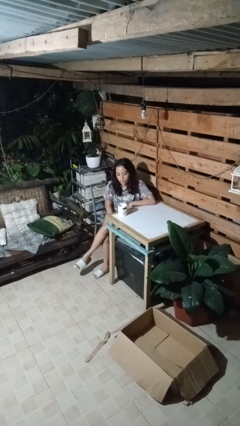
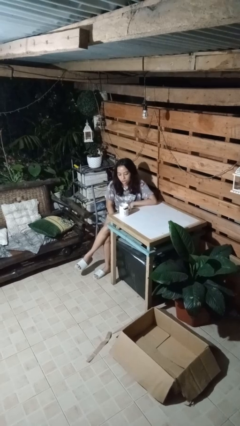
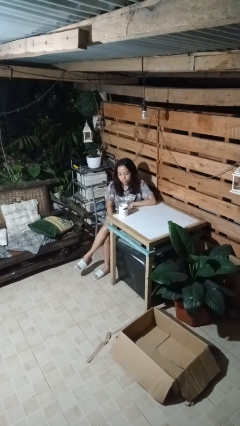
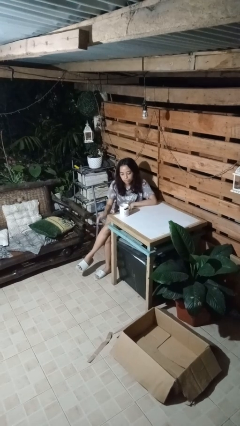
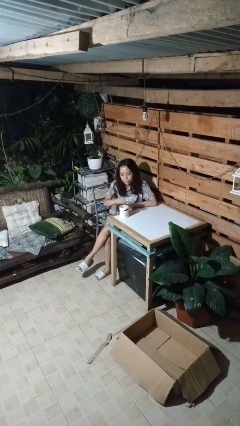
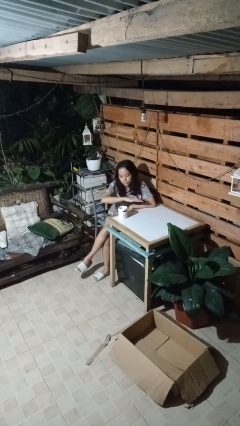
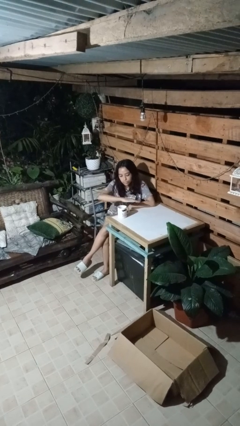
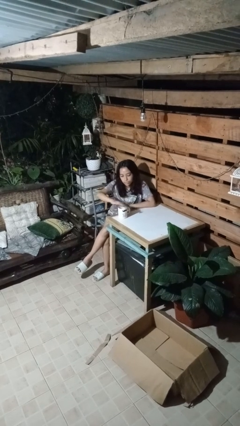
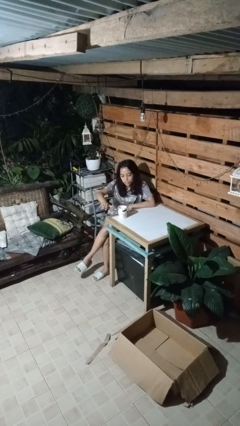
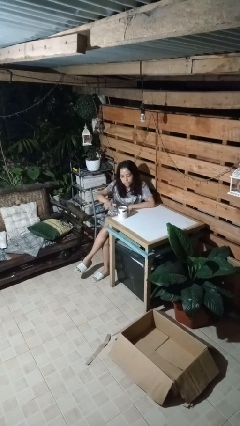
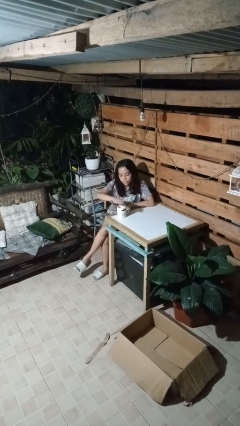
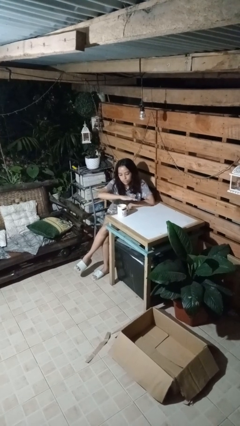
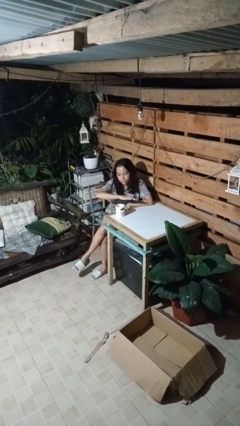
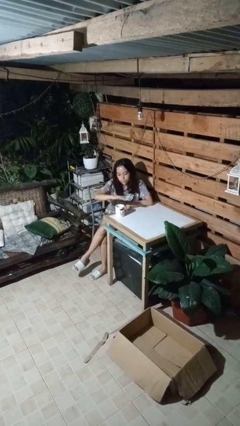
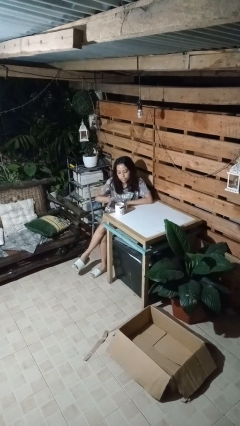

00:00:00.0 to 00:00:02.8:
person waves hand over object

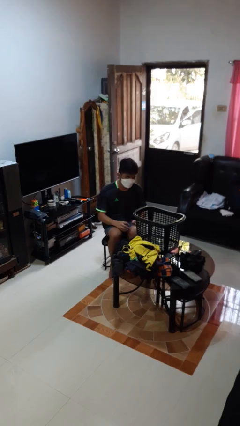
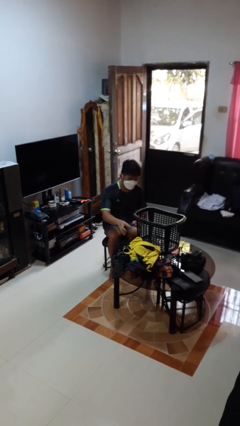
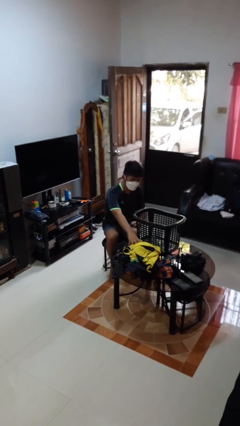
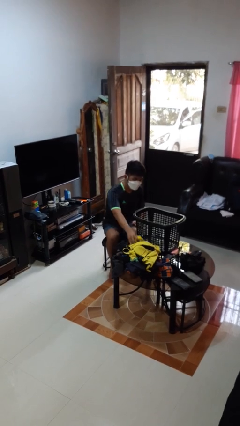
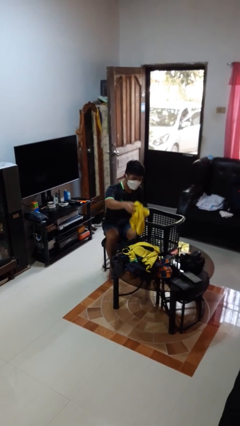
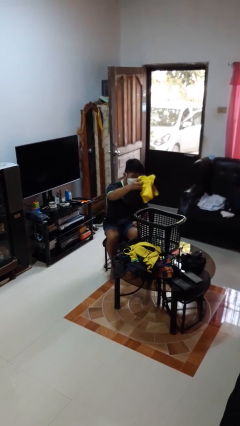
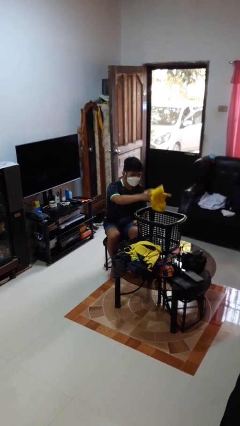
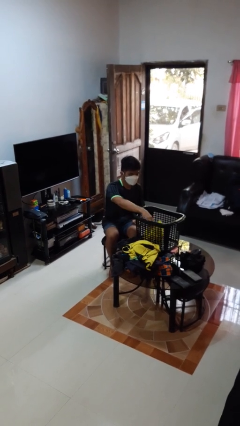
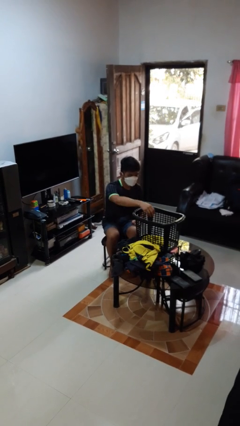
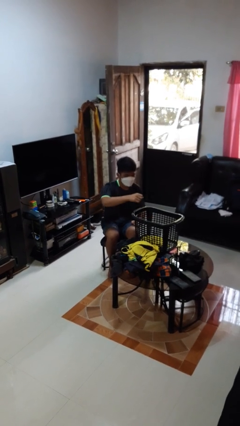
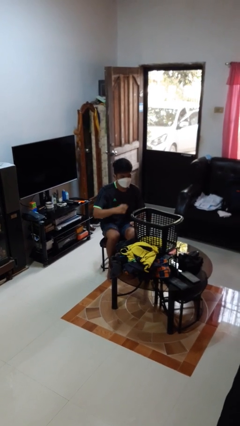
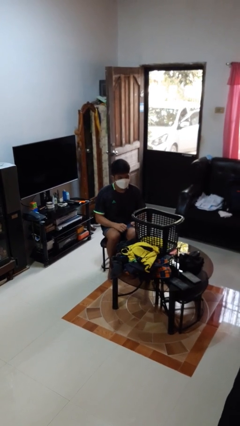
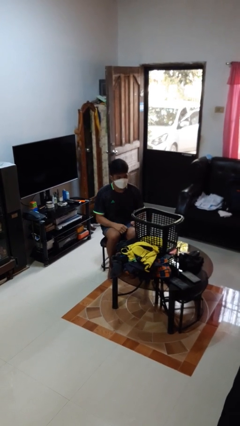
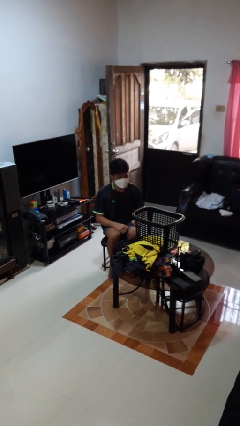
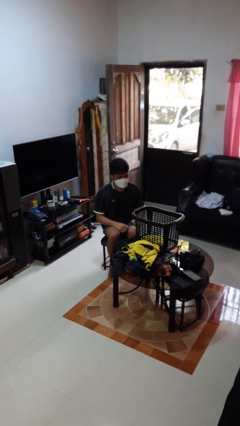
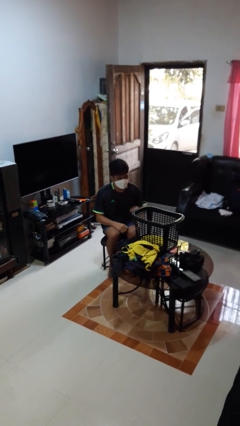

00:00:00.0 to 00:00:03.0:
person puts object into basket

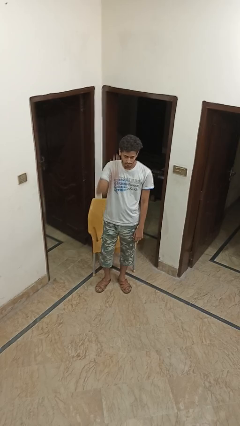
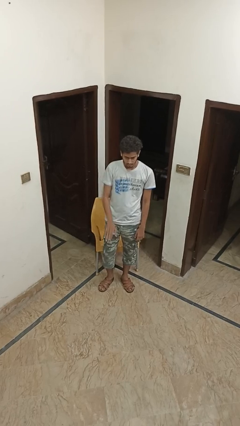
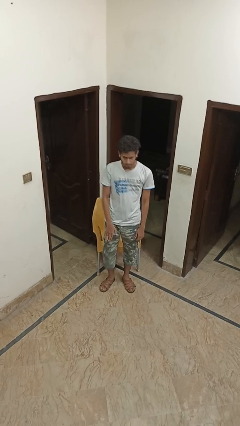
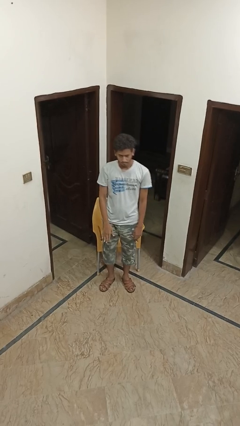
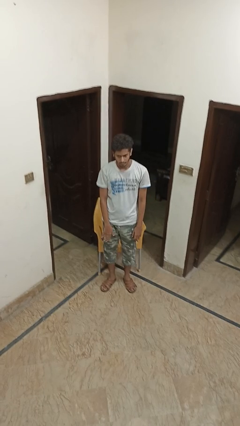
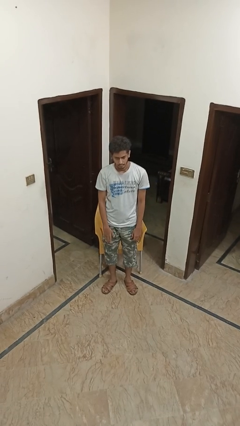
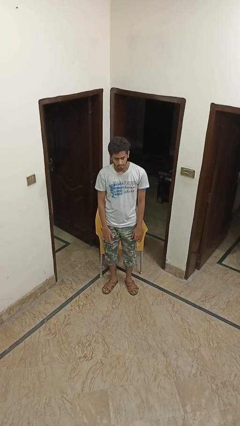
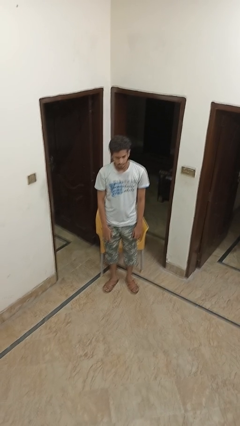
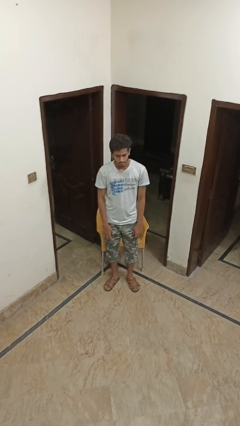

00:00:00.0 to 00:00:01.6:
person gestures lower hand

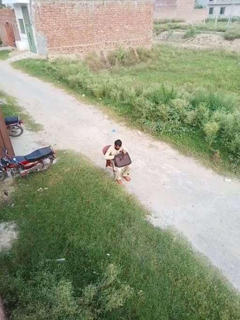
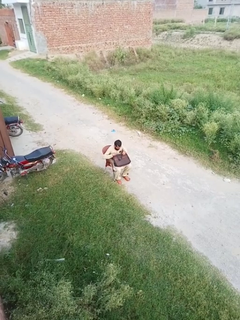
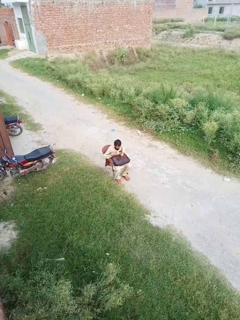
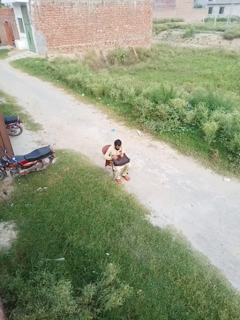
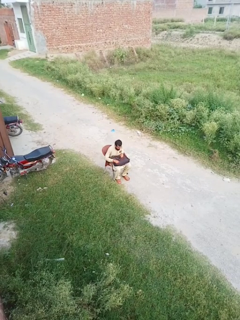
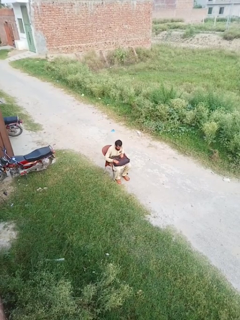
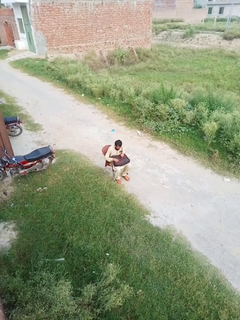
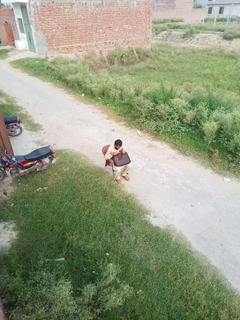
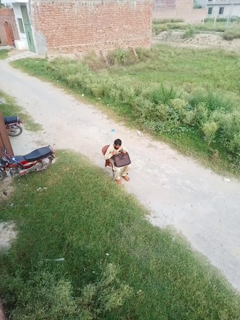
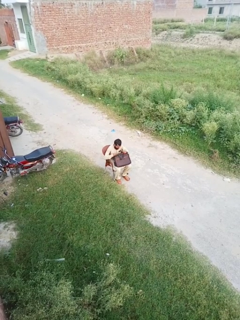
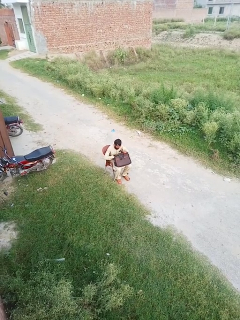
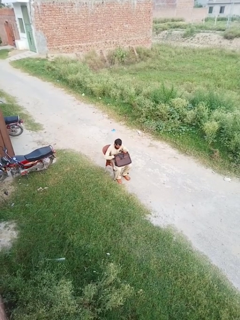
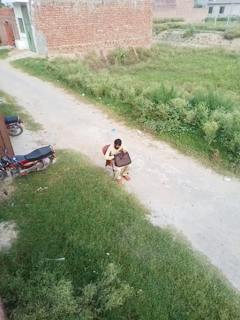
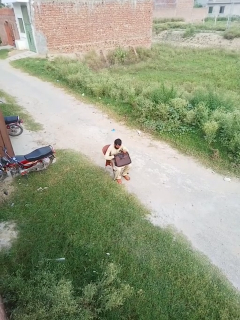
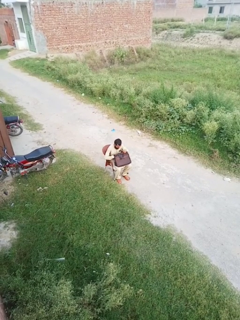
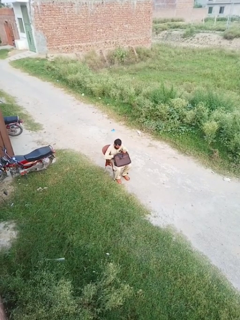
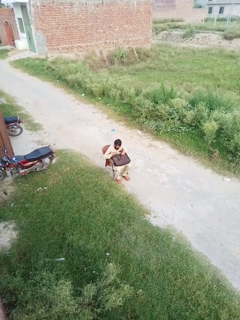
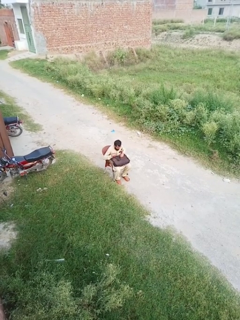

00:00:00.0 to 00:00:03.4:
person searches in bag

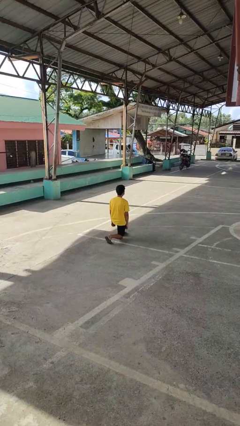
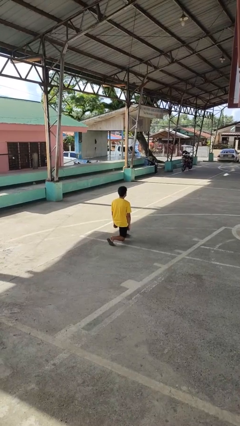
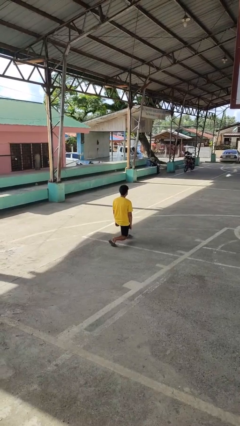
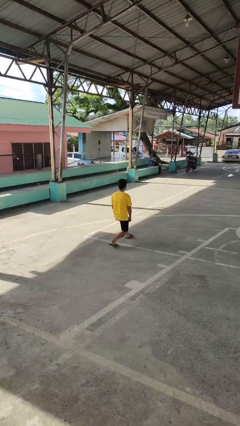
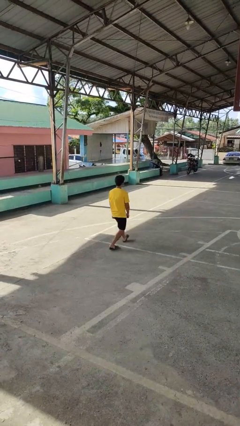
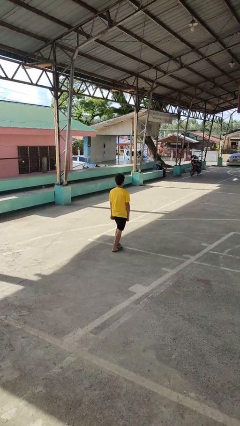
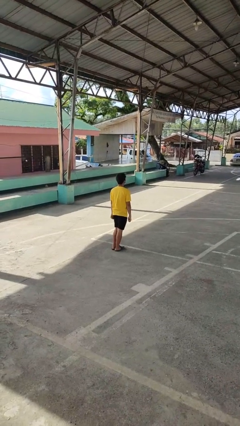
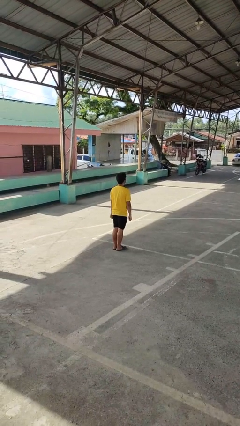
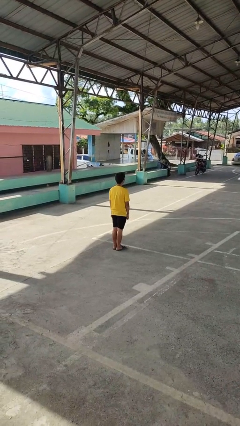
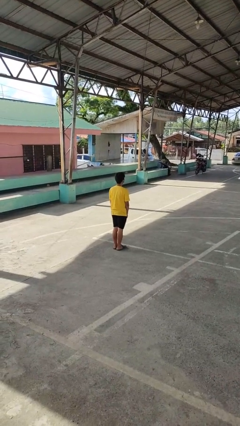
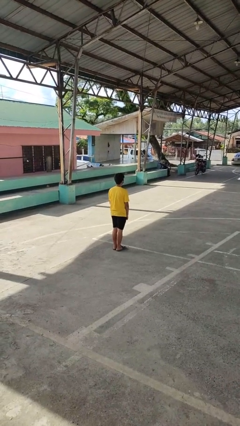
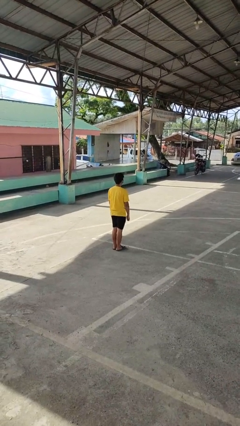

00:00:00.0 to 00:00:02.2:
person stands up from floor

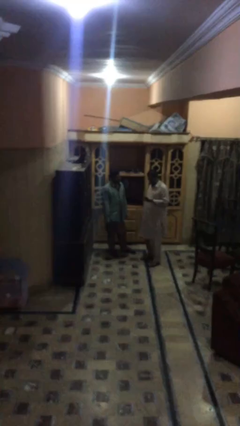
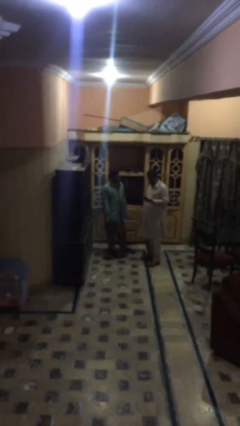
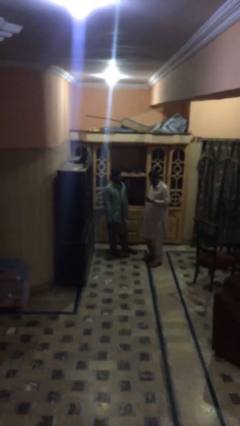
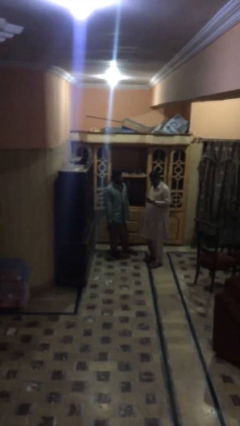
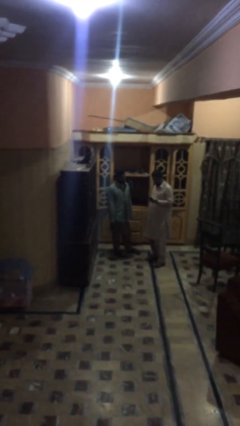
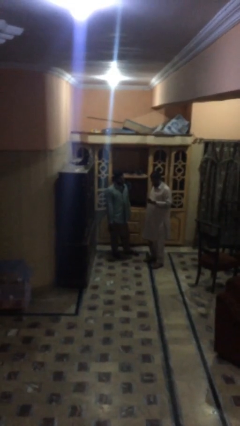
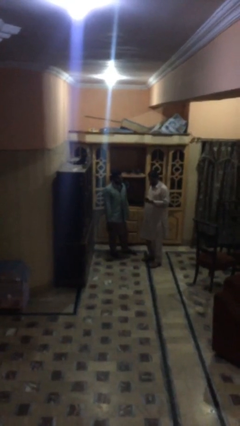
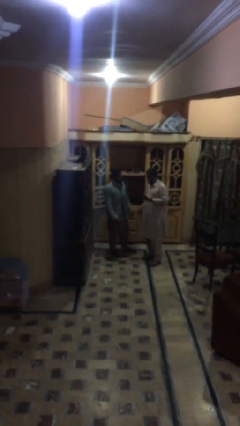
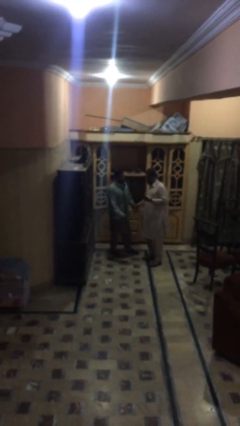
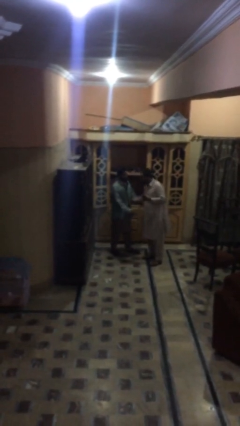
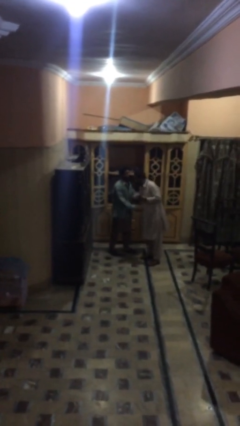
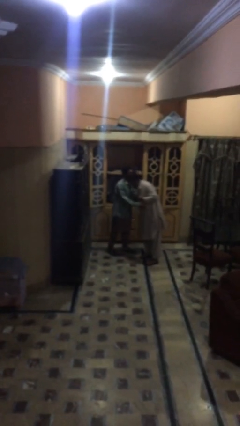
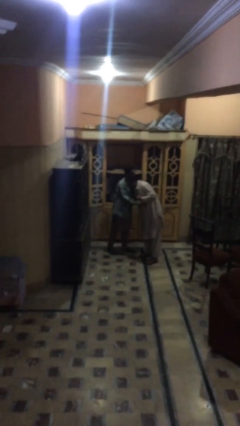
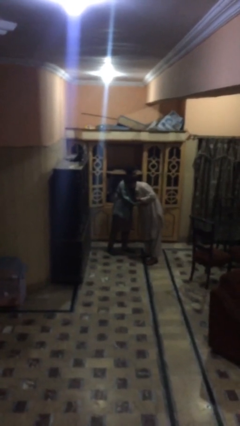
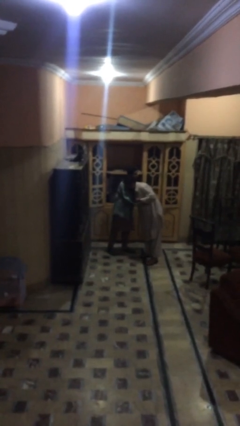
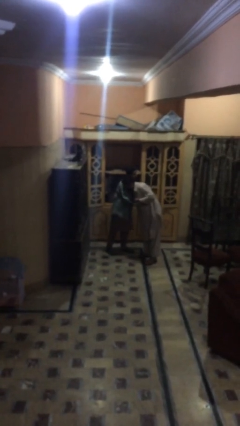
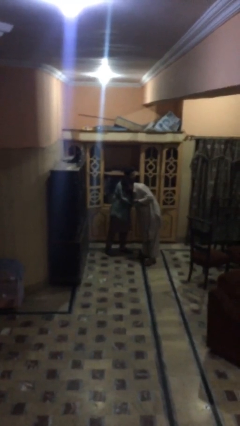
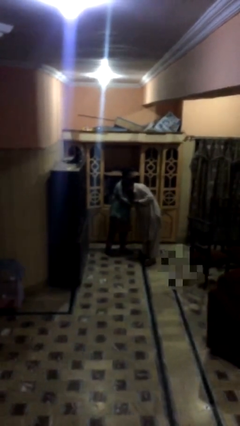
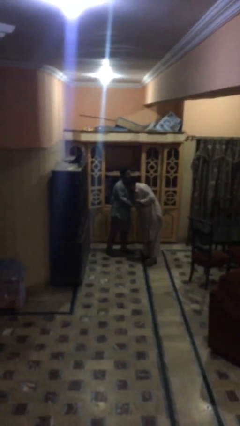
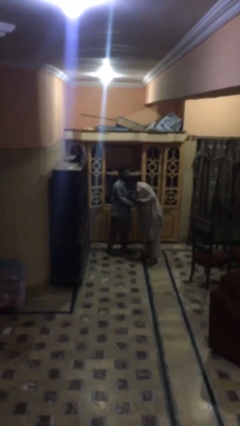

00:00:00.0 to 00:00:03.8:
person embraces person

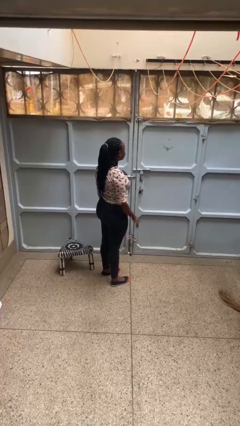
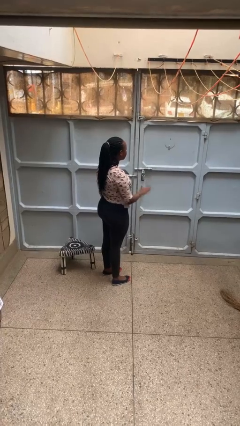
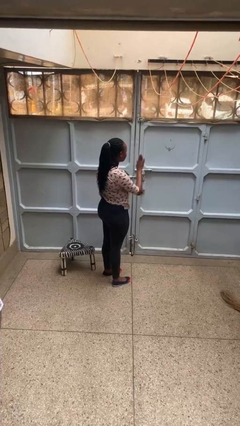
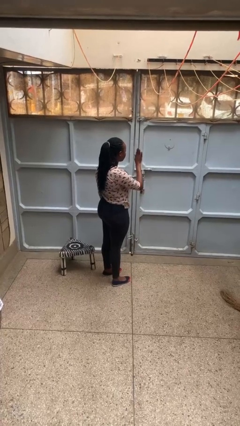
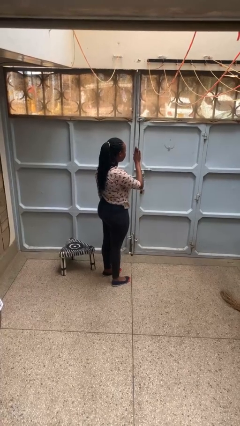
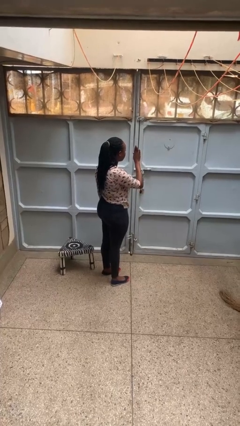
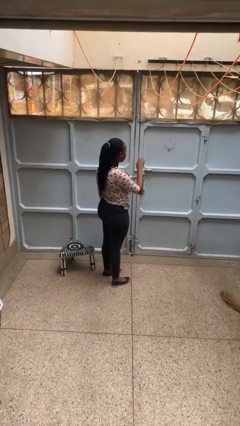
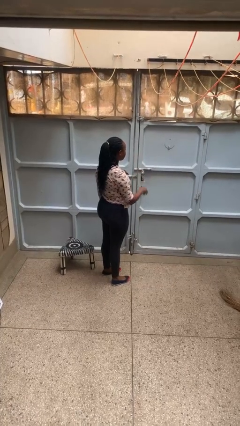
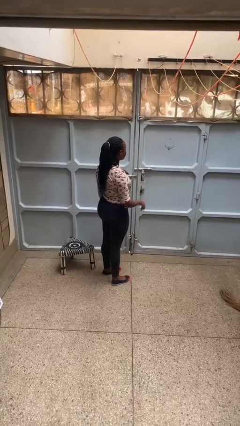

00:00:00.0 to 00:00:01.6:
person gestures stop

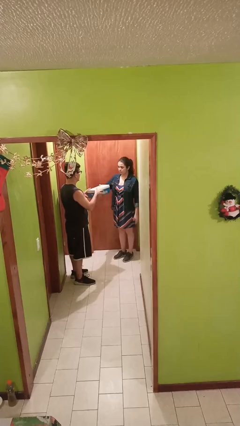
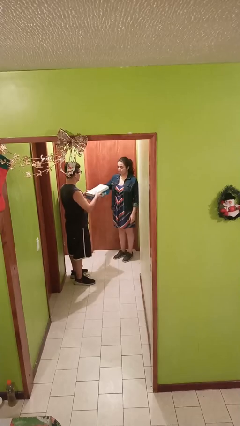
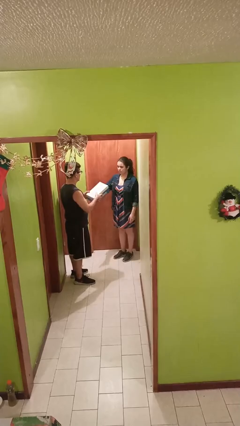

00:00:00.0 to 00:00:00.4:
person transfers object to person
